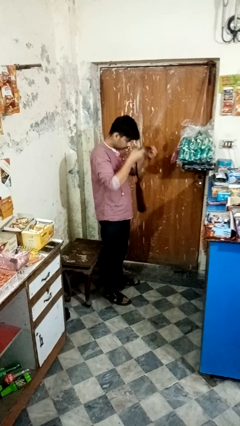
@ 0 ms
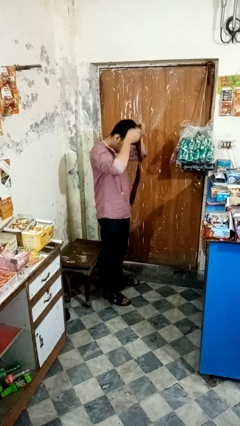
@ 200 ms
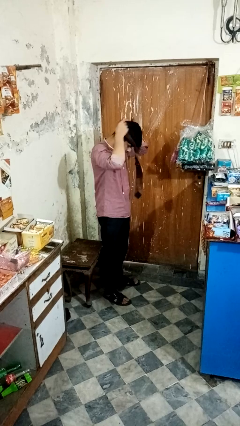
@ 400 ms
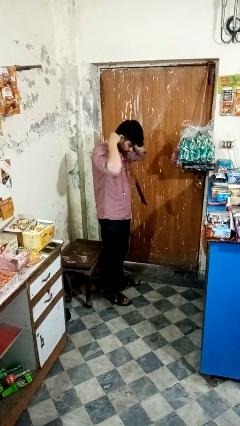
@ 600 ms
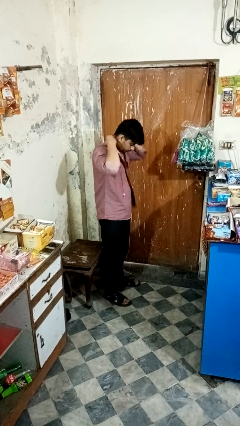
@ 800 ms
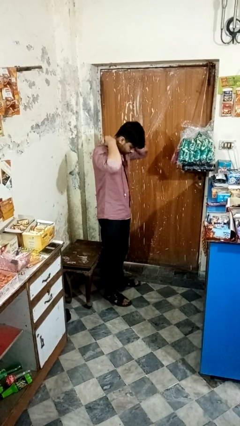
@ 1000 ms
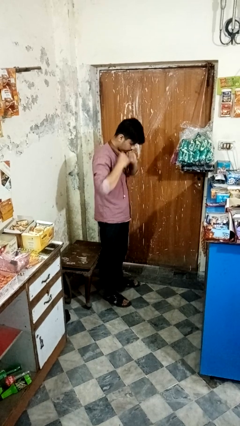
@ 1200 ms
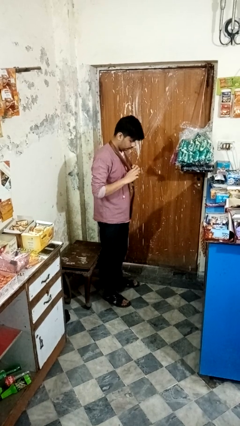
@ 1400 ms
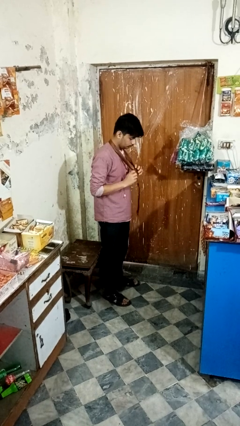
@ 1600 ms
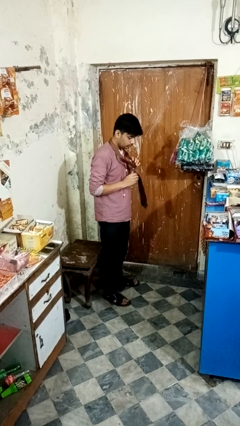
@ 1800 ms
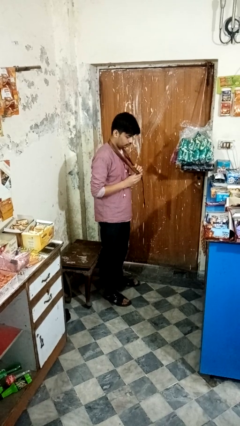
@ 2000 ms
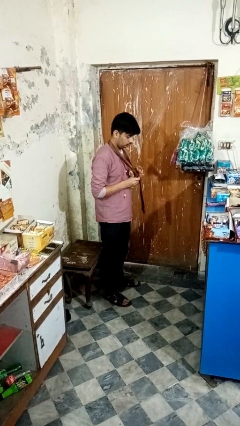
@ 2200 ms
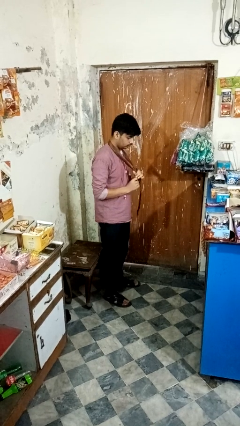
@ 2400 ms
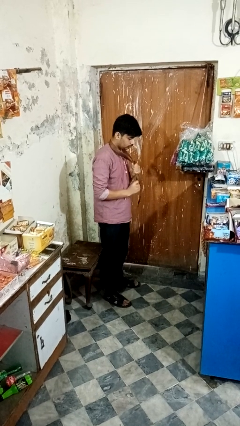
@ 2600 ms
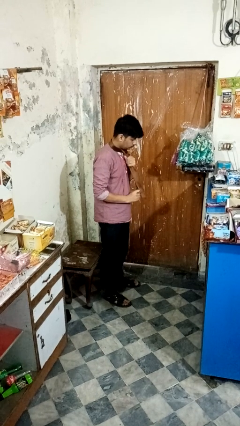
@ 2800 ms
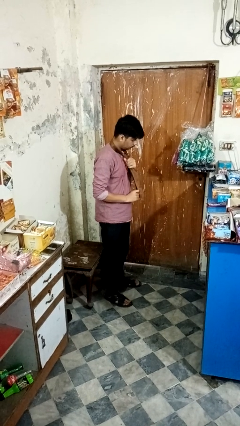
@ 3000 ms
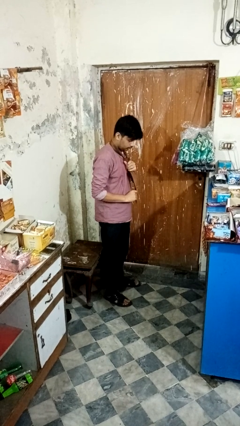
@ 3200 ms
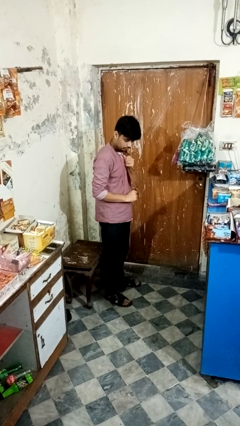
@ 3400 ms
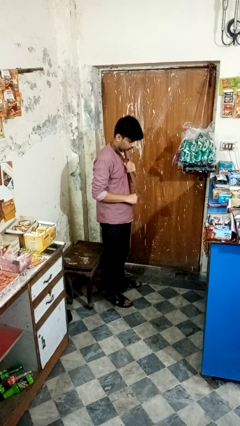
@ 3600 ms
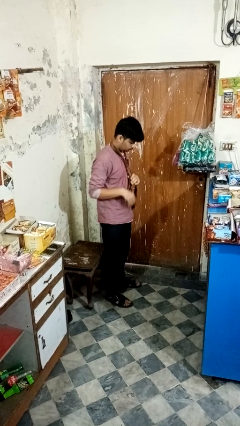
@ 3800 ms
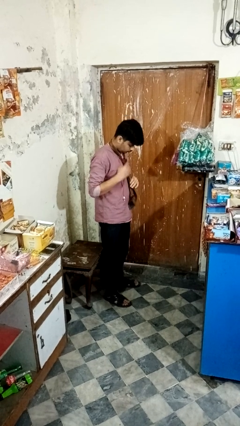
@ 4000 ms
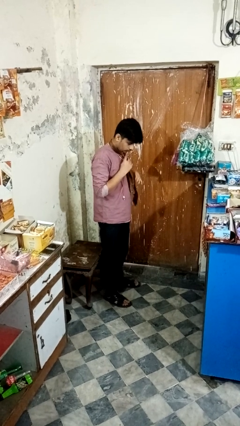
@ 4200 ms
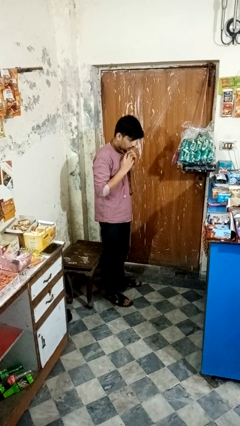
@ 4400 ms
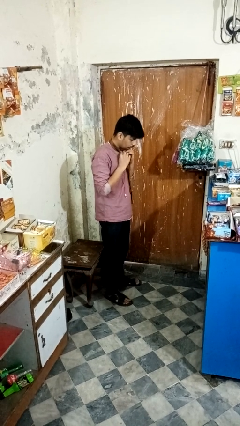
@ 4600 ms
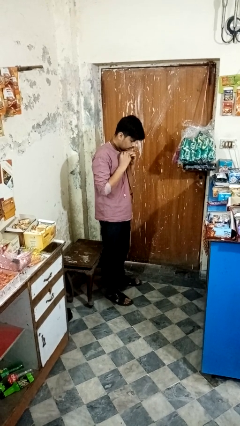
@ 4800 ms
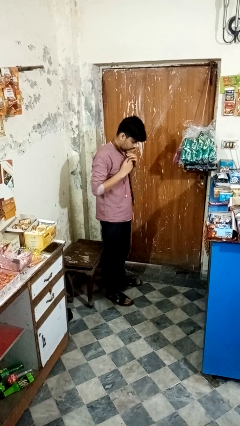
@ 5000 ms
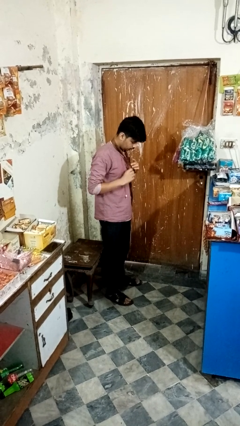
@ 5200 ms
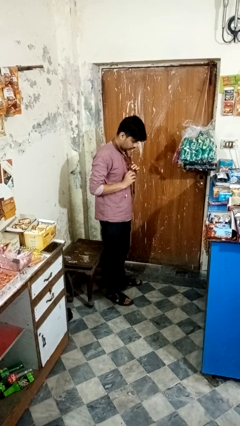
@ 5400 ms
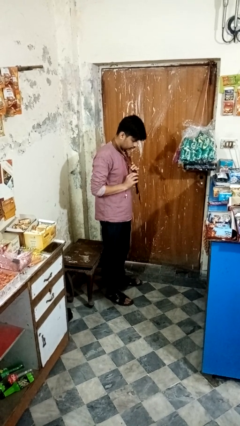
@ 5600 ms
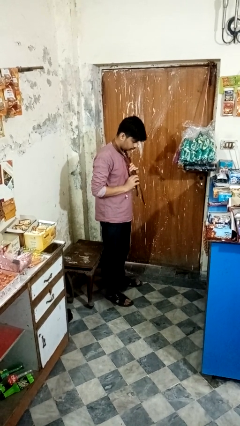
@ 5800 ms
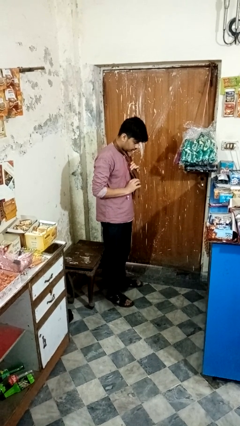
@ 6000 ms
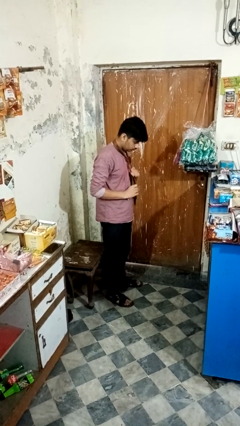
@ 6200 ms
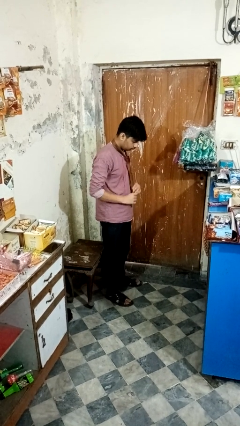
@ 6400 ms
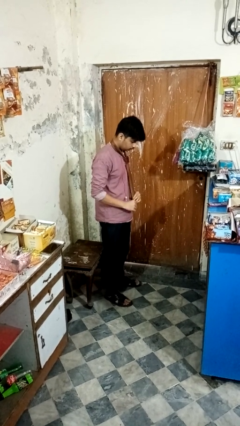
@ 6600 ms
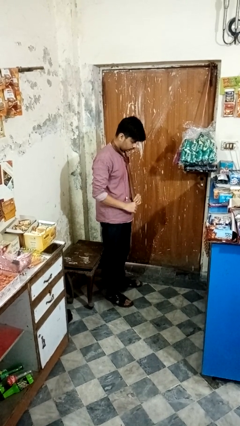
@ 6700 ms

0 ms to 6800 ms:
person puts on necktie

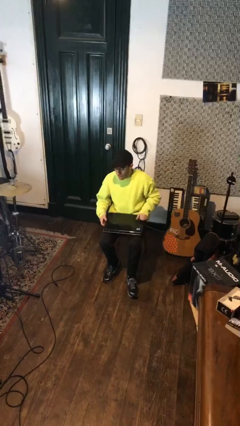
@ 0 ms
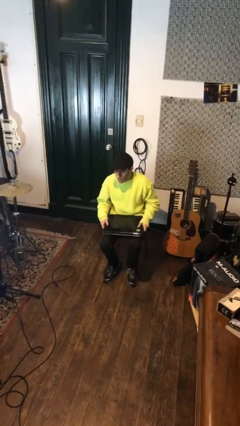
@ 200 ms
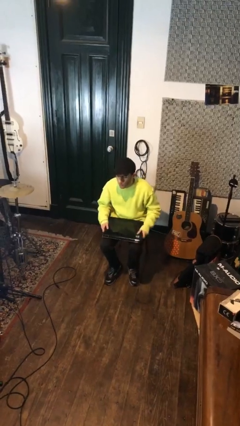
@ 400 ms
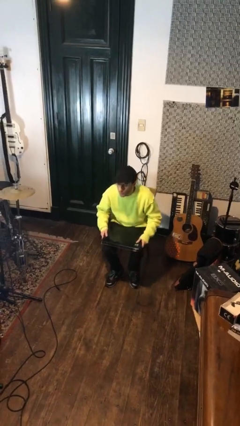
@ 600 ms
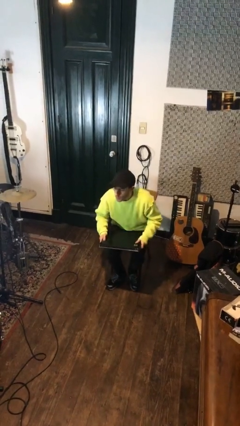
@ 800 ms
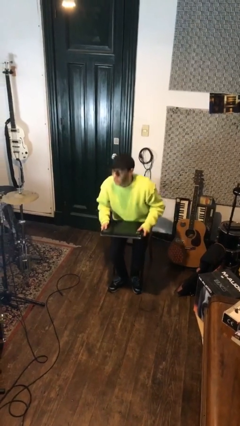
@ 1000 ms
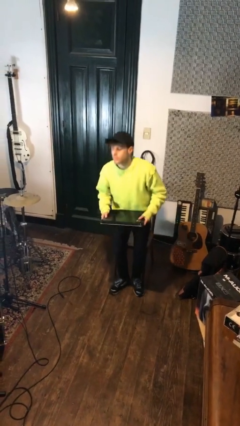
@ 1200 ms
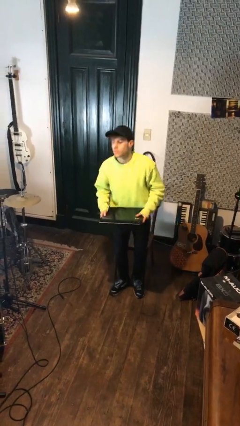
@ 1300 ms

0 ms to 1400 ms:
person stands up

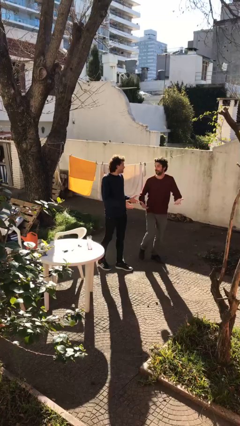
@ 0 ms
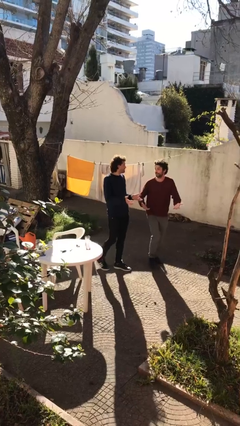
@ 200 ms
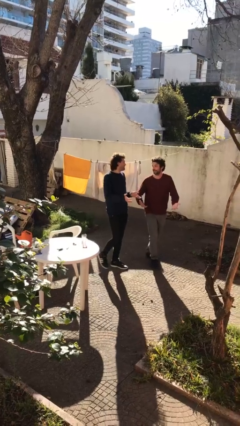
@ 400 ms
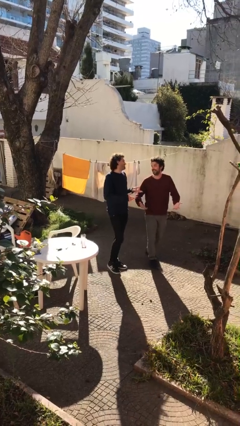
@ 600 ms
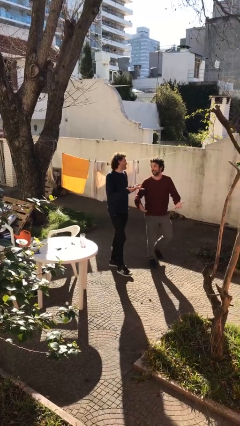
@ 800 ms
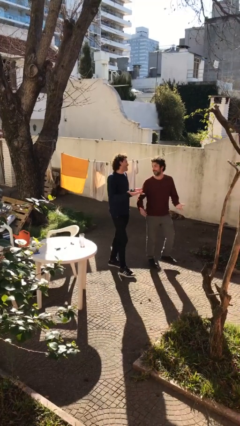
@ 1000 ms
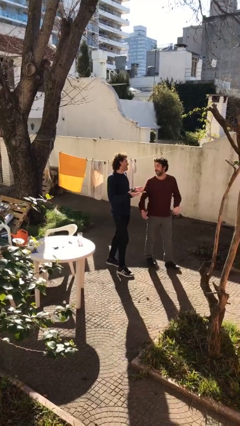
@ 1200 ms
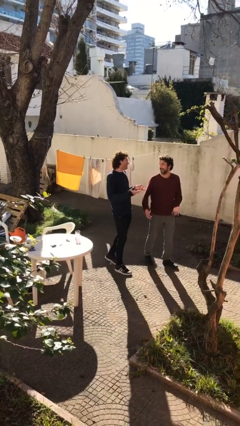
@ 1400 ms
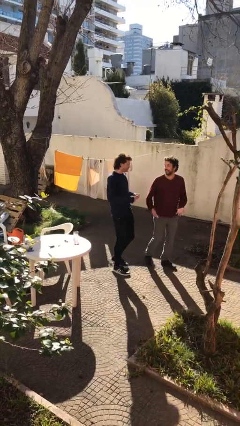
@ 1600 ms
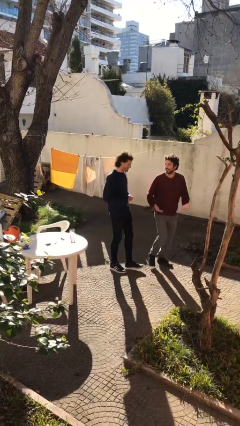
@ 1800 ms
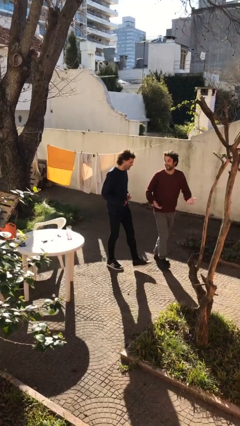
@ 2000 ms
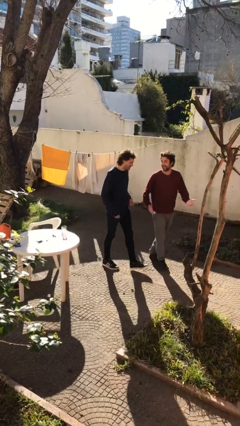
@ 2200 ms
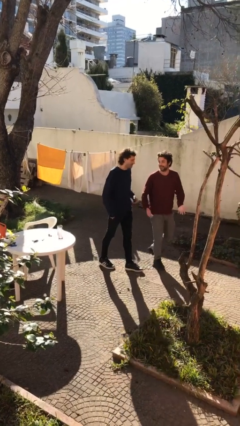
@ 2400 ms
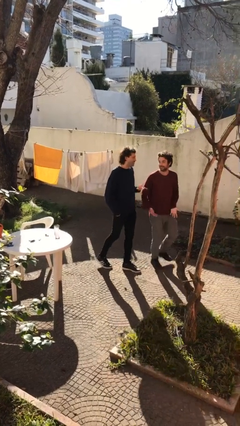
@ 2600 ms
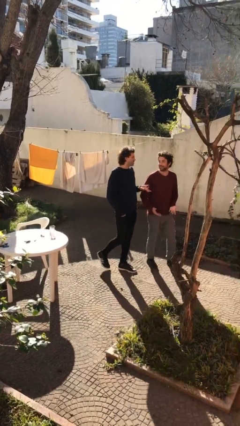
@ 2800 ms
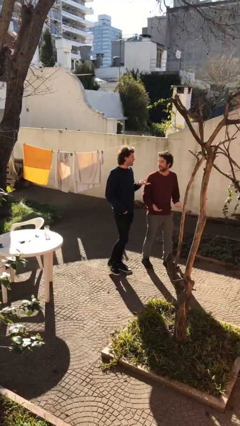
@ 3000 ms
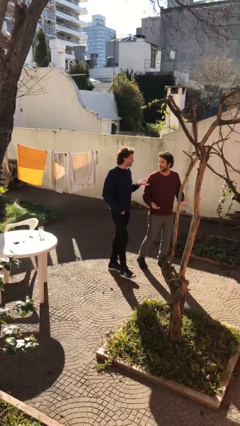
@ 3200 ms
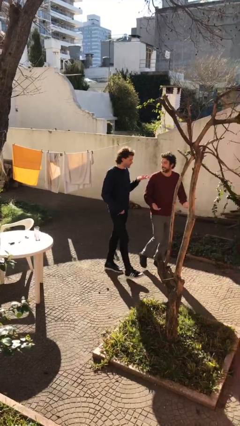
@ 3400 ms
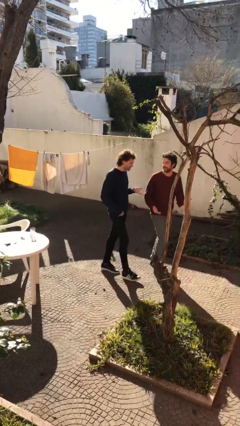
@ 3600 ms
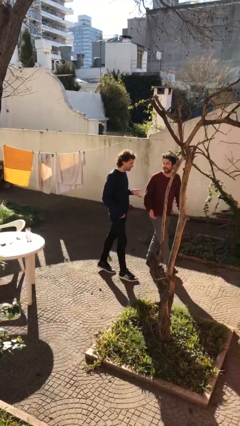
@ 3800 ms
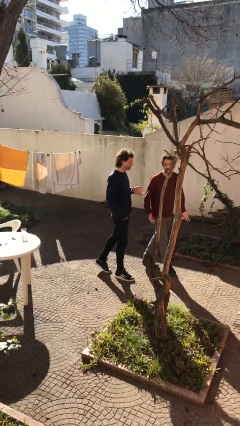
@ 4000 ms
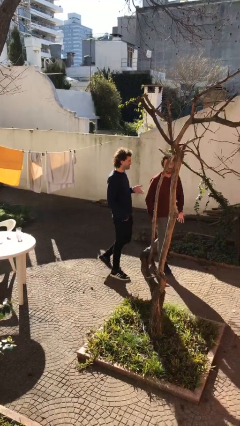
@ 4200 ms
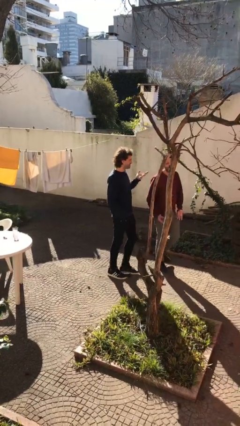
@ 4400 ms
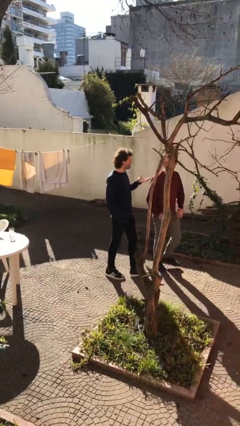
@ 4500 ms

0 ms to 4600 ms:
person talks to person

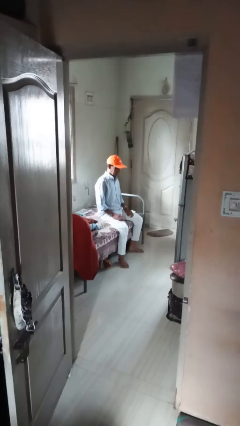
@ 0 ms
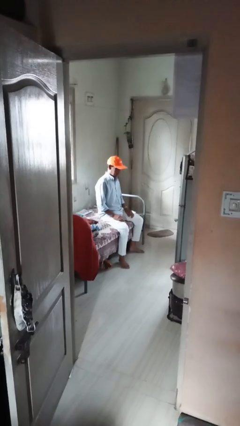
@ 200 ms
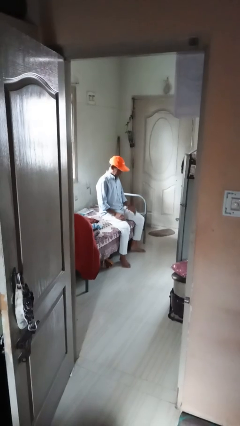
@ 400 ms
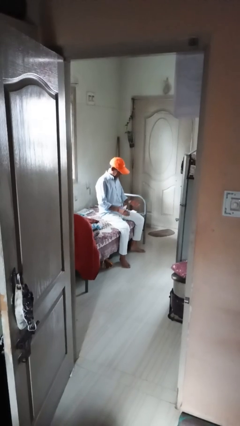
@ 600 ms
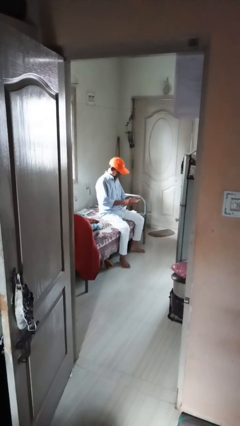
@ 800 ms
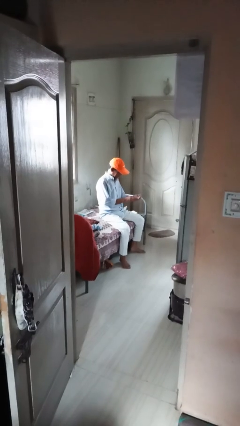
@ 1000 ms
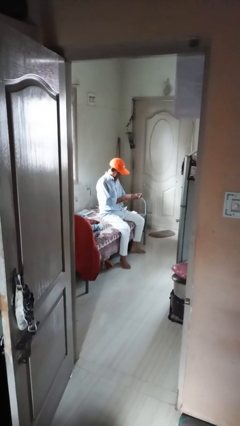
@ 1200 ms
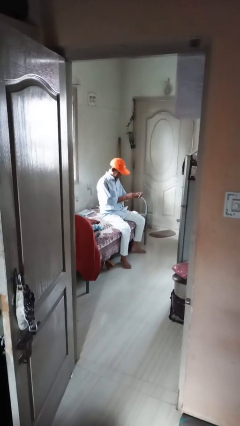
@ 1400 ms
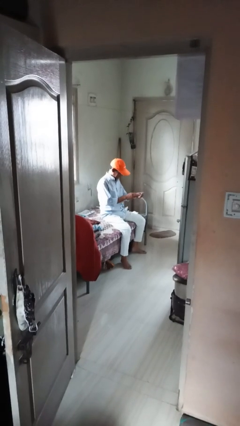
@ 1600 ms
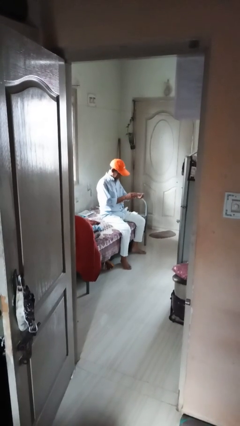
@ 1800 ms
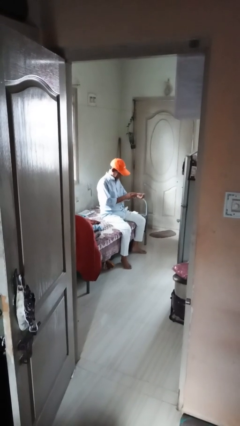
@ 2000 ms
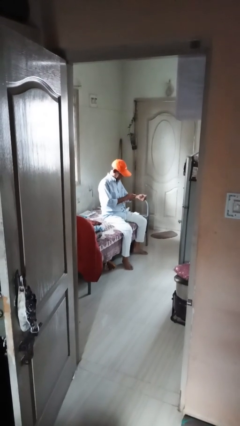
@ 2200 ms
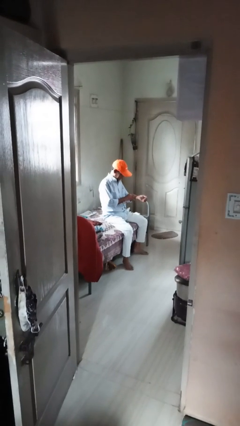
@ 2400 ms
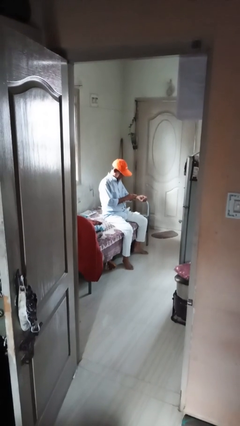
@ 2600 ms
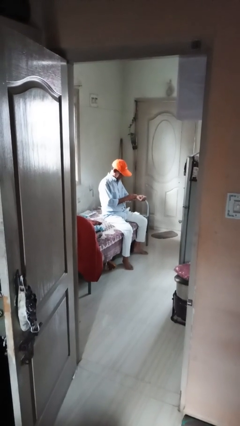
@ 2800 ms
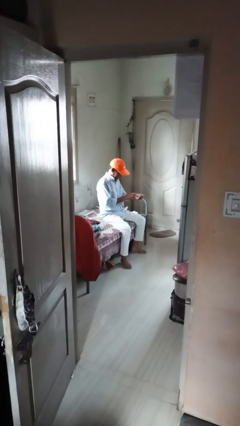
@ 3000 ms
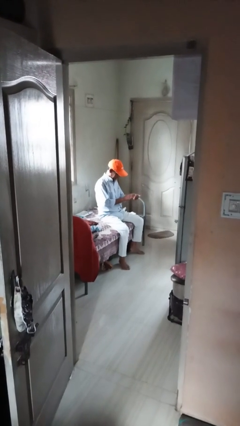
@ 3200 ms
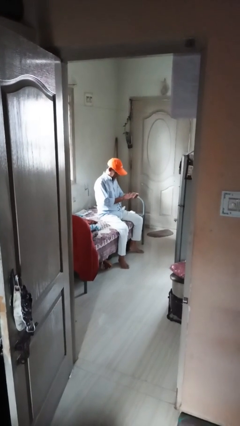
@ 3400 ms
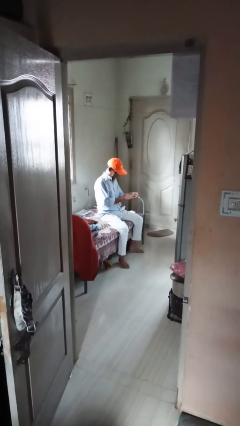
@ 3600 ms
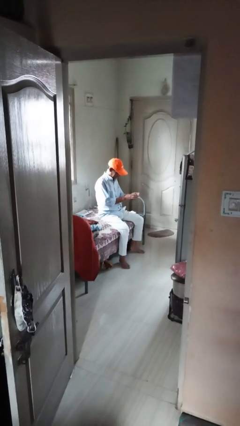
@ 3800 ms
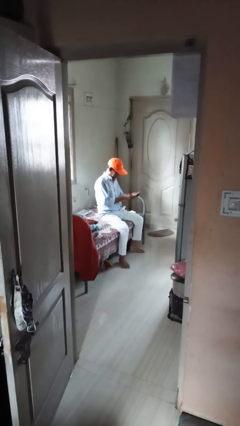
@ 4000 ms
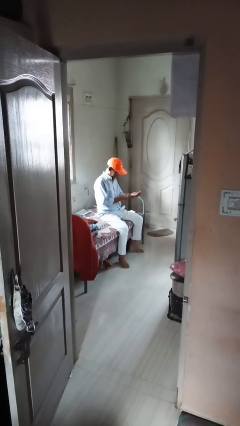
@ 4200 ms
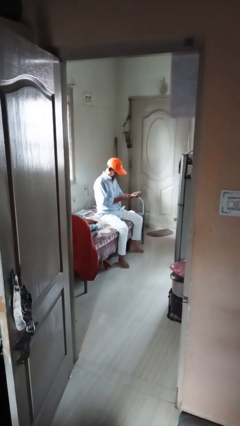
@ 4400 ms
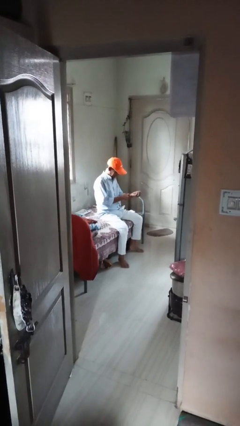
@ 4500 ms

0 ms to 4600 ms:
person looks at hands in lap
